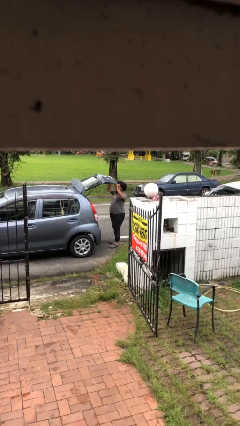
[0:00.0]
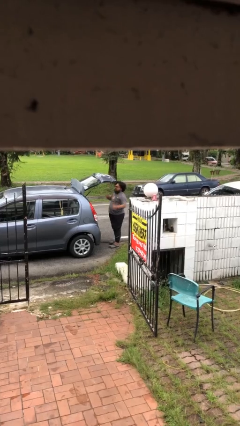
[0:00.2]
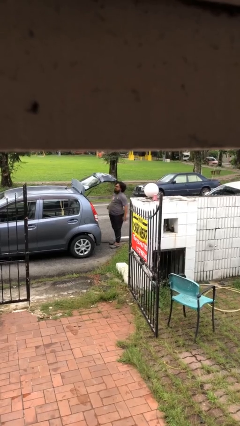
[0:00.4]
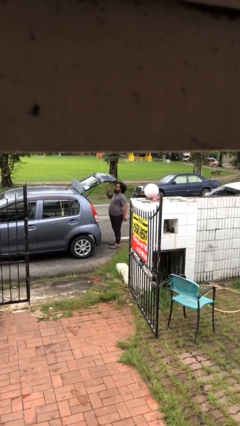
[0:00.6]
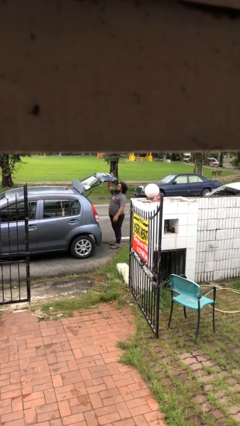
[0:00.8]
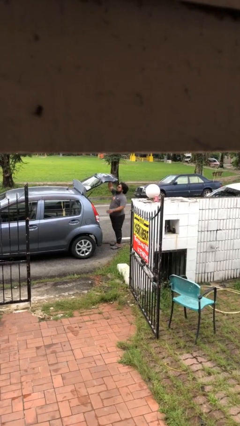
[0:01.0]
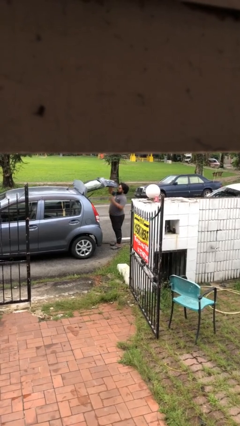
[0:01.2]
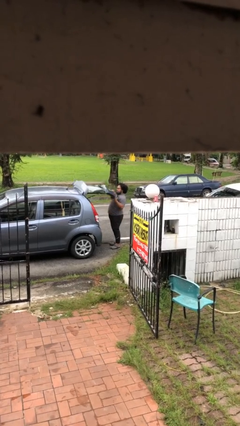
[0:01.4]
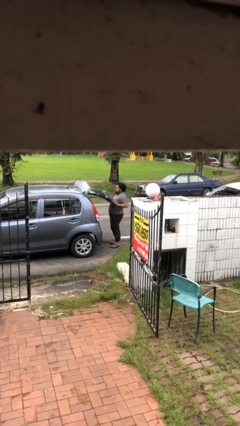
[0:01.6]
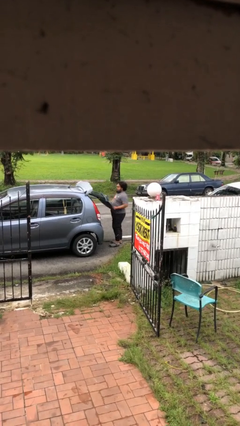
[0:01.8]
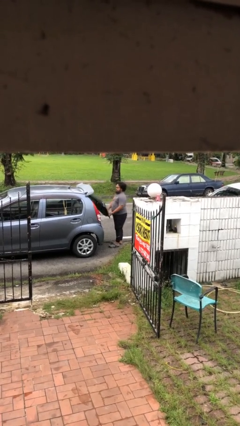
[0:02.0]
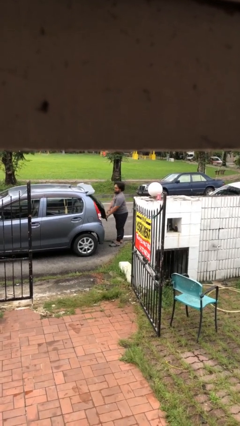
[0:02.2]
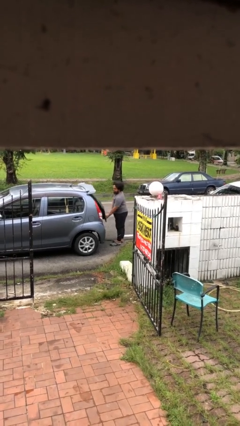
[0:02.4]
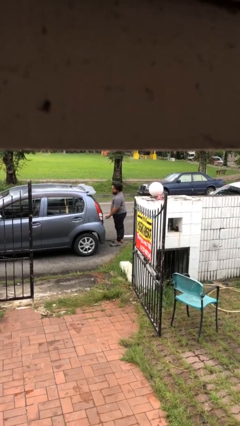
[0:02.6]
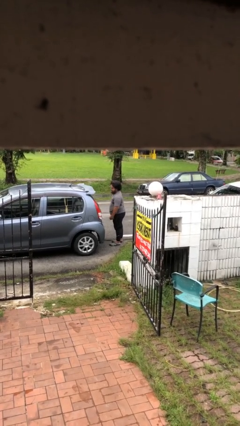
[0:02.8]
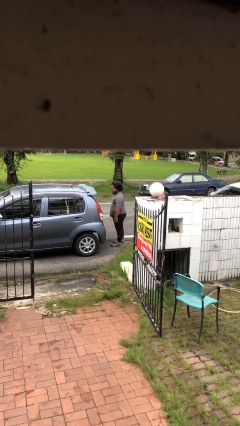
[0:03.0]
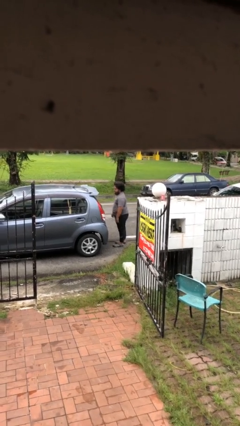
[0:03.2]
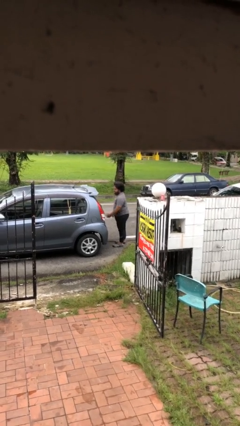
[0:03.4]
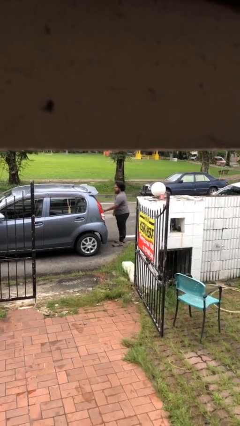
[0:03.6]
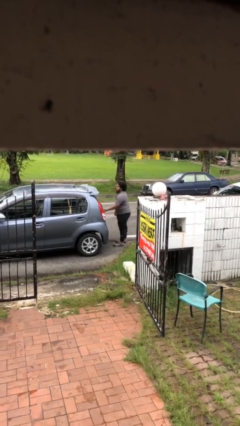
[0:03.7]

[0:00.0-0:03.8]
person closes car trunk

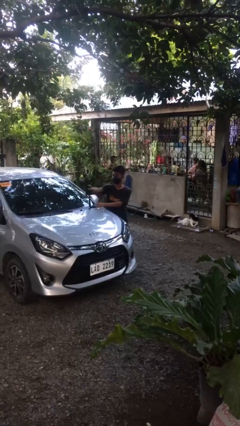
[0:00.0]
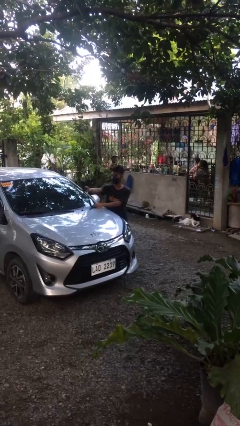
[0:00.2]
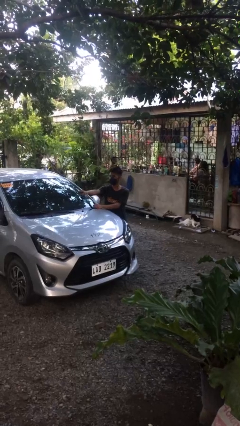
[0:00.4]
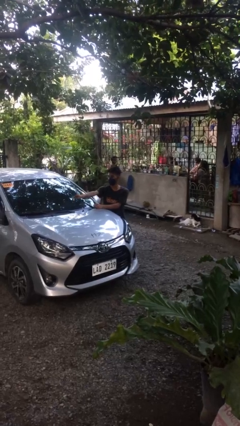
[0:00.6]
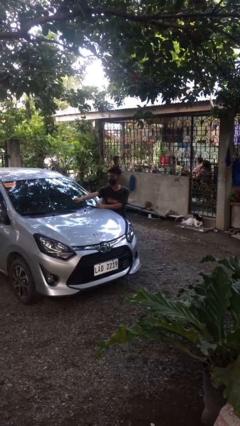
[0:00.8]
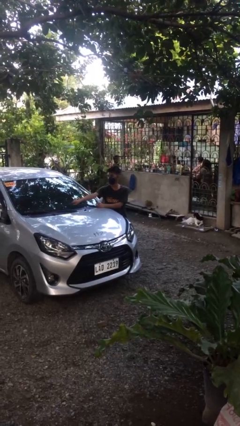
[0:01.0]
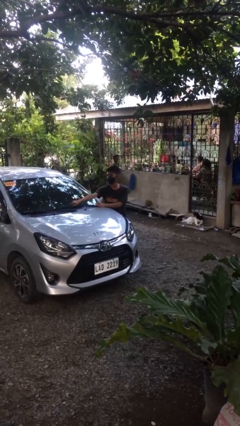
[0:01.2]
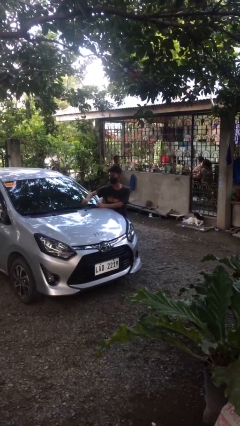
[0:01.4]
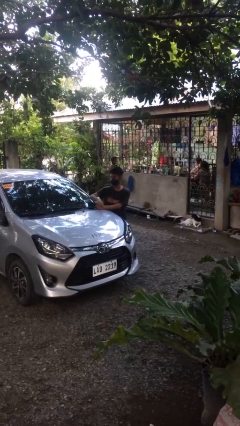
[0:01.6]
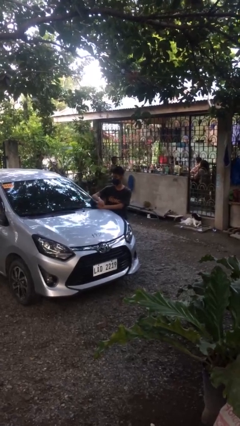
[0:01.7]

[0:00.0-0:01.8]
person flips down car wipers

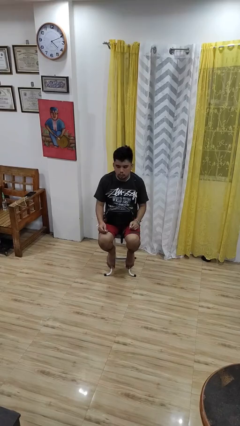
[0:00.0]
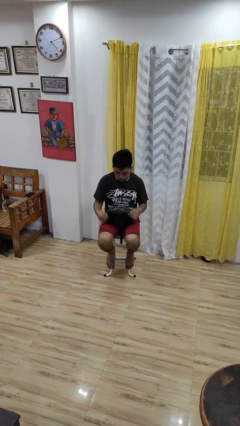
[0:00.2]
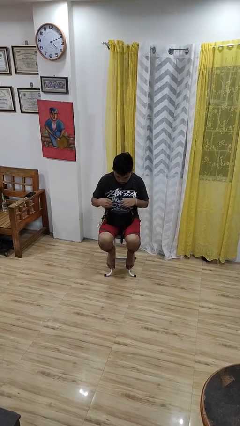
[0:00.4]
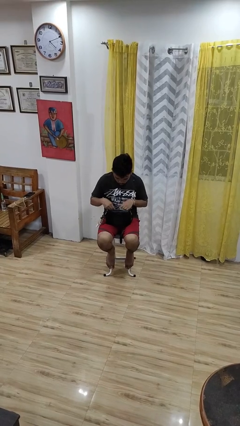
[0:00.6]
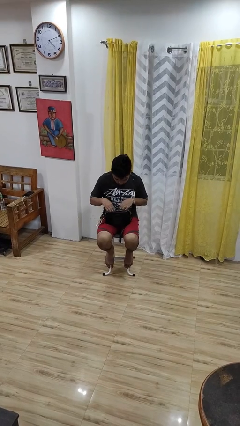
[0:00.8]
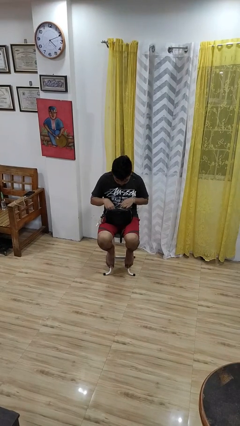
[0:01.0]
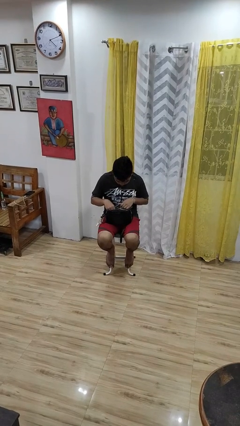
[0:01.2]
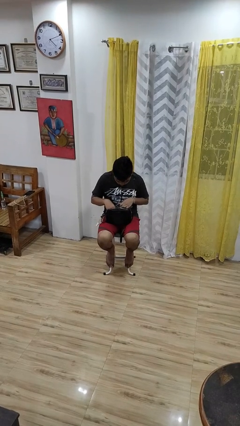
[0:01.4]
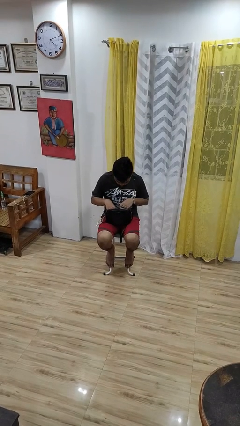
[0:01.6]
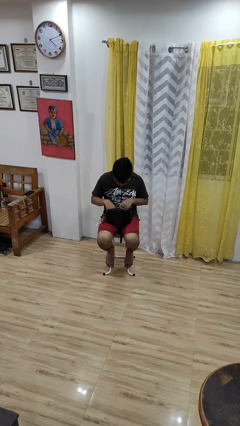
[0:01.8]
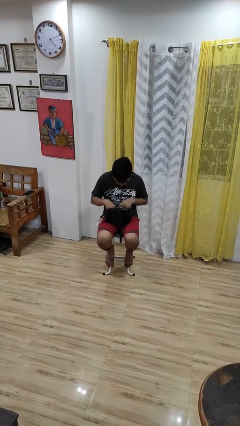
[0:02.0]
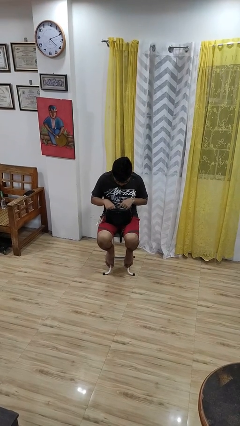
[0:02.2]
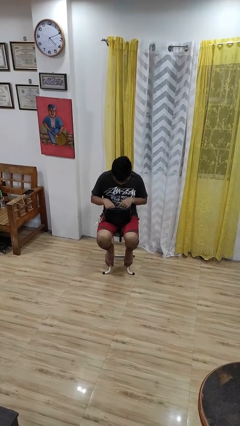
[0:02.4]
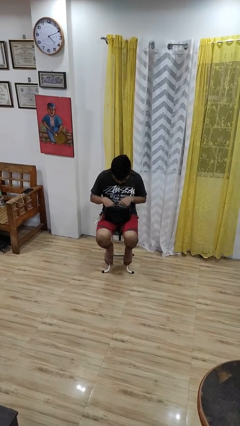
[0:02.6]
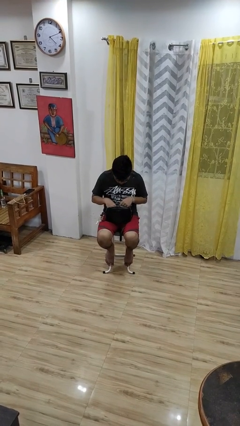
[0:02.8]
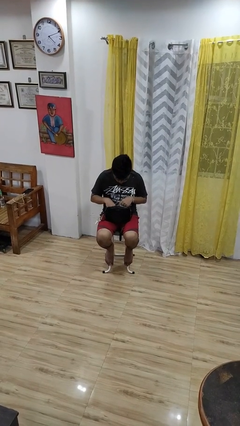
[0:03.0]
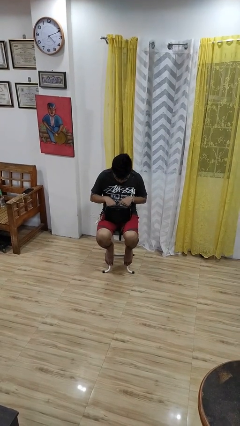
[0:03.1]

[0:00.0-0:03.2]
person searches in purse

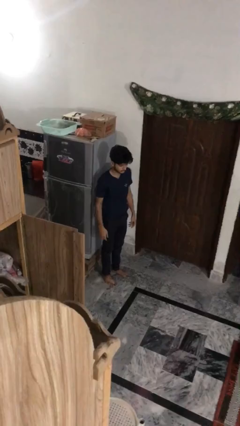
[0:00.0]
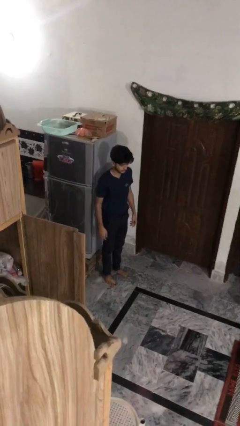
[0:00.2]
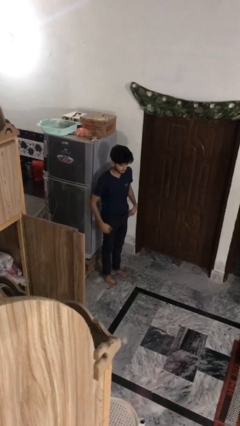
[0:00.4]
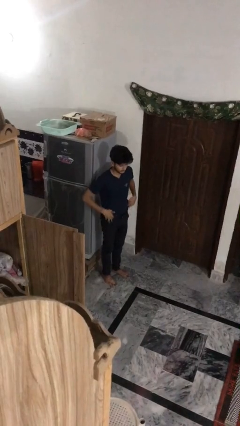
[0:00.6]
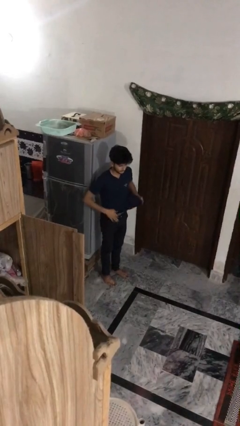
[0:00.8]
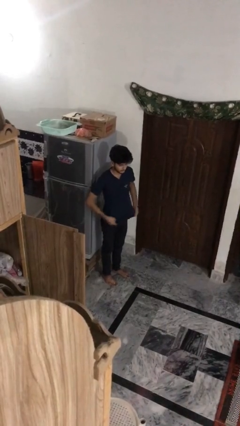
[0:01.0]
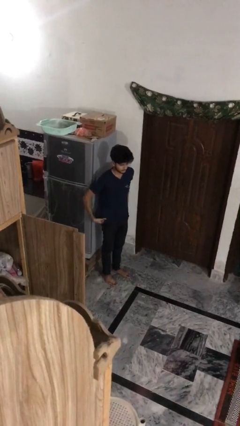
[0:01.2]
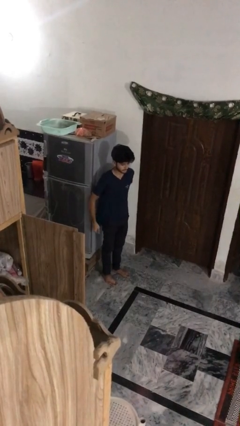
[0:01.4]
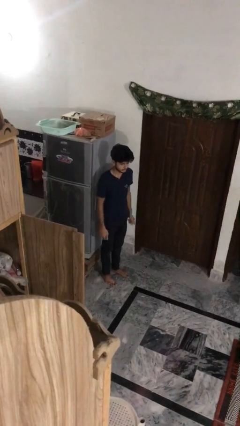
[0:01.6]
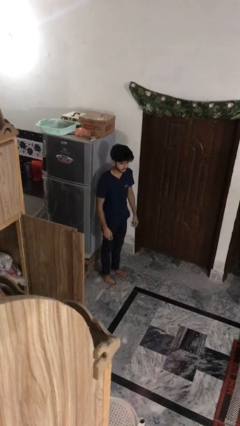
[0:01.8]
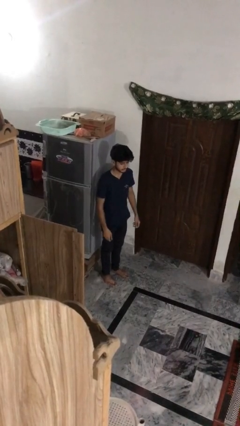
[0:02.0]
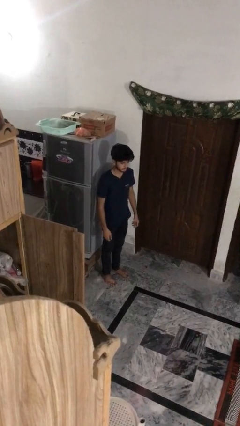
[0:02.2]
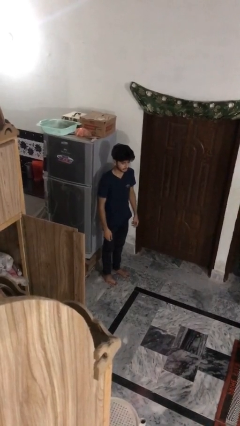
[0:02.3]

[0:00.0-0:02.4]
person untucks shirt

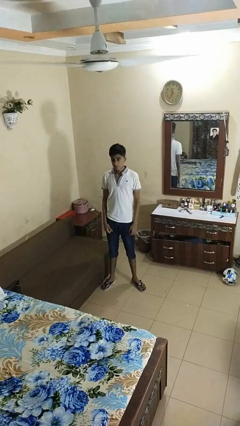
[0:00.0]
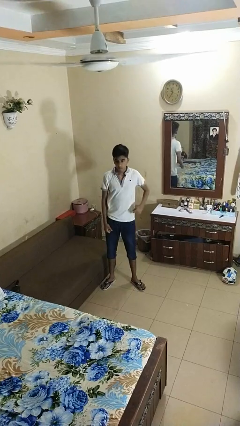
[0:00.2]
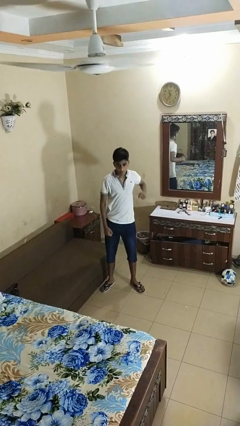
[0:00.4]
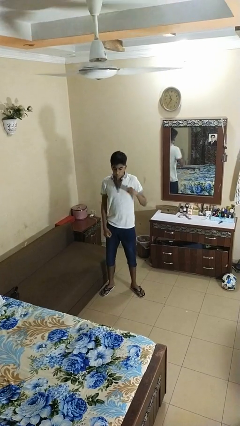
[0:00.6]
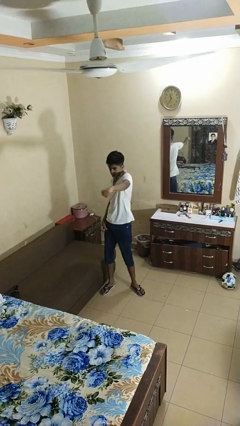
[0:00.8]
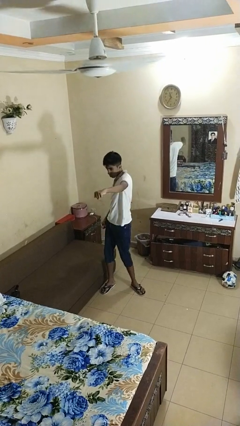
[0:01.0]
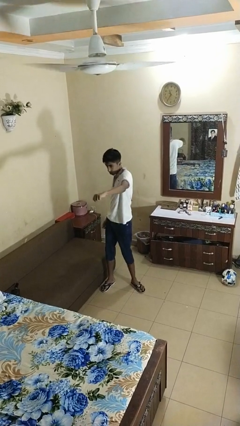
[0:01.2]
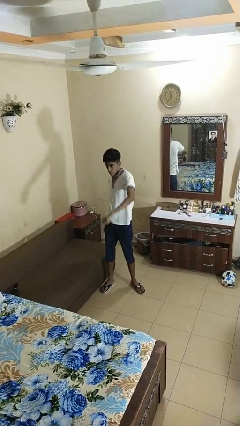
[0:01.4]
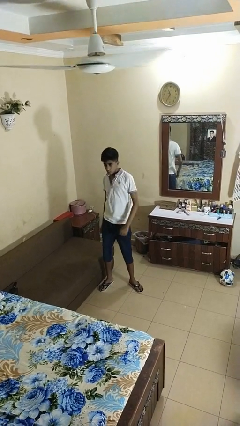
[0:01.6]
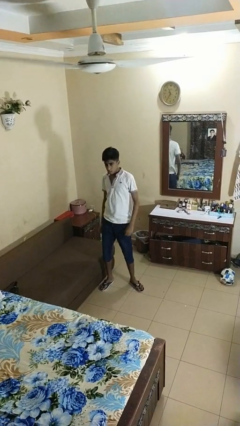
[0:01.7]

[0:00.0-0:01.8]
person punches

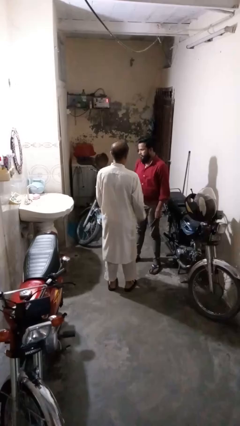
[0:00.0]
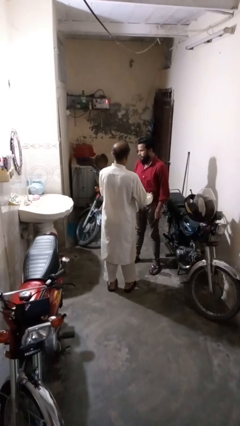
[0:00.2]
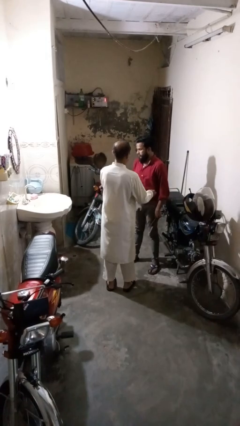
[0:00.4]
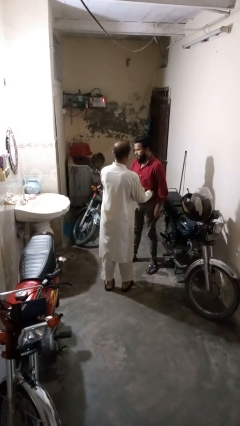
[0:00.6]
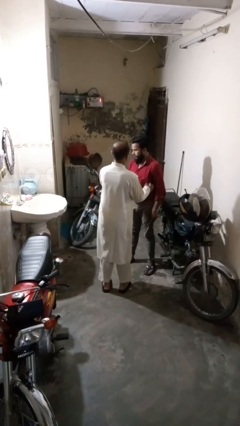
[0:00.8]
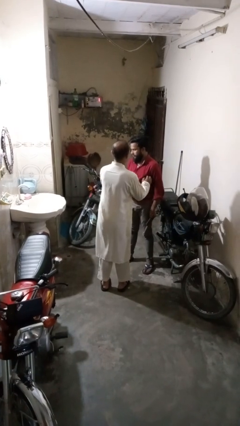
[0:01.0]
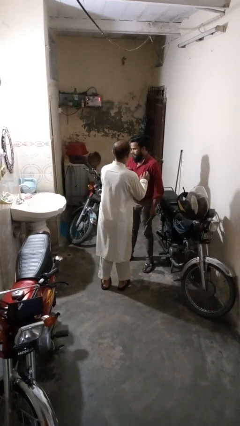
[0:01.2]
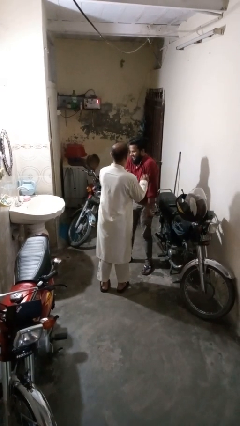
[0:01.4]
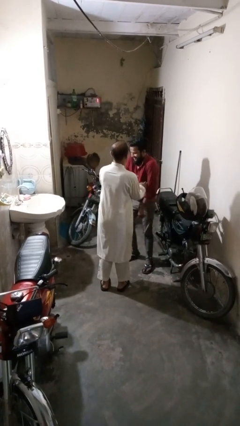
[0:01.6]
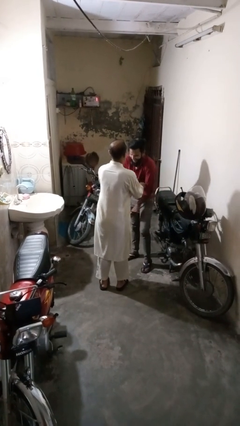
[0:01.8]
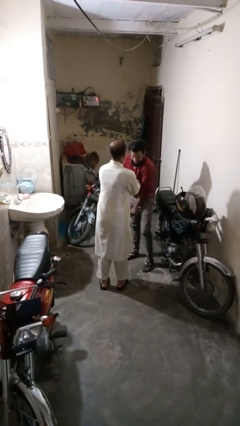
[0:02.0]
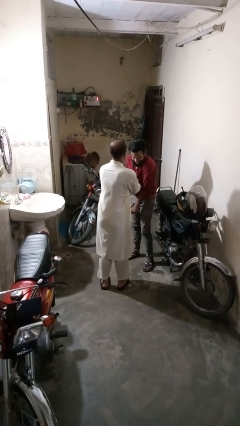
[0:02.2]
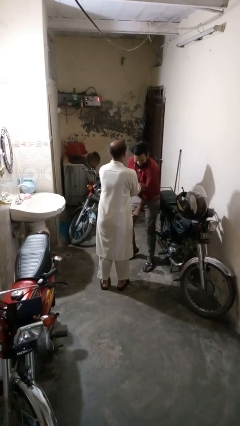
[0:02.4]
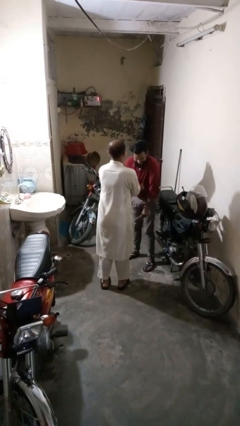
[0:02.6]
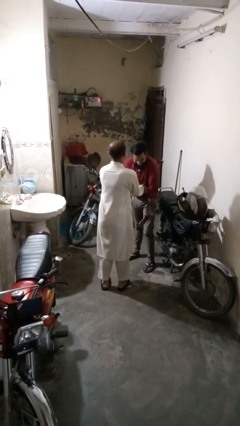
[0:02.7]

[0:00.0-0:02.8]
person tickles person

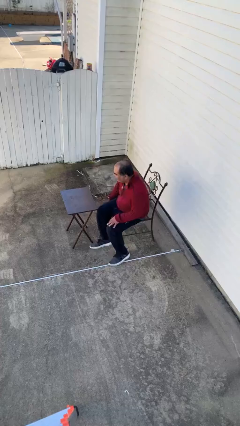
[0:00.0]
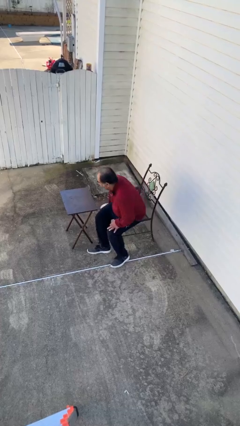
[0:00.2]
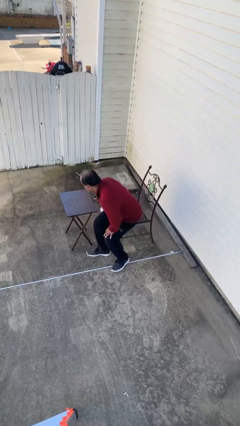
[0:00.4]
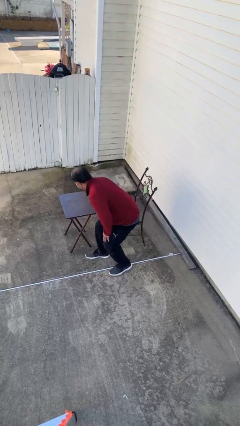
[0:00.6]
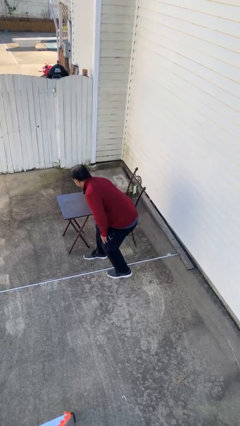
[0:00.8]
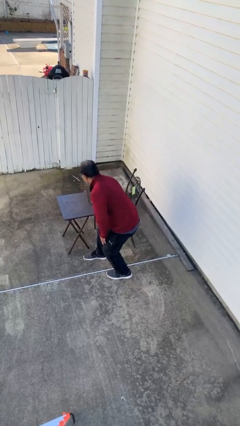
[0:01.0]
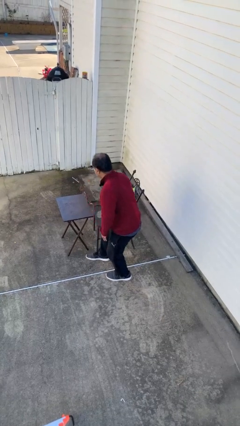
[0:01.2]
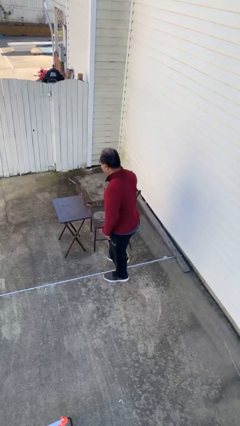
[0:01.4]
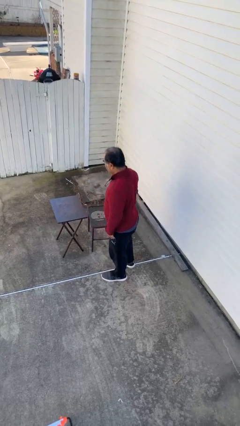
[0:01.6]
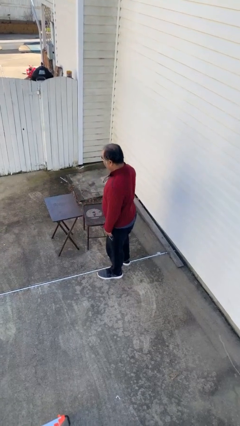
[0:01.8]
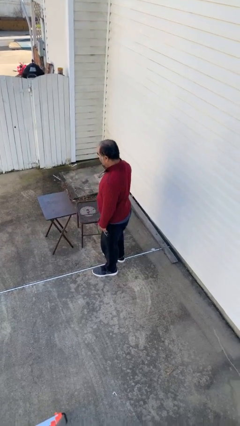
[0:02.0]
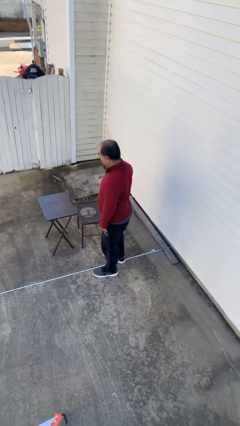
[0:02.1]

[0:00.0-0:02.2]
person stands up
